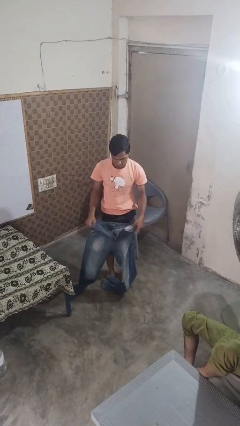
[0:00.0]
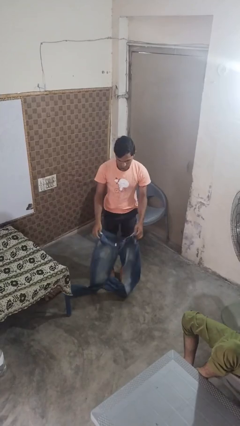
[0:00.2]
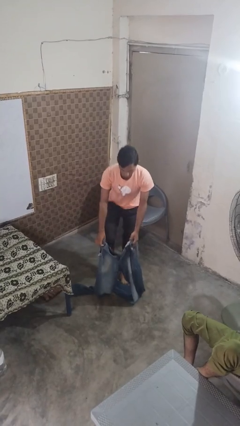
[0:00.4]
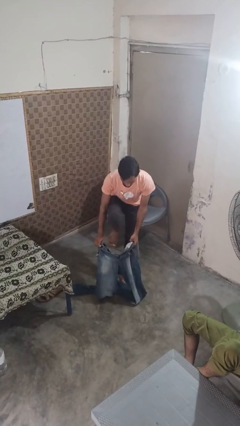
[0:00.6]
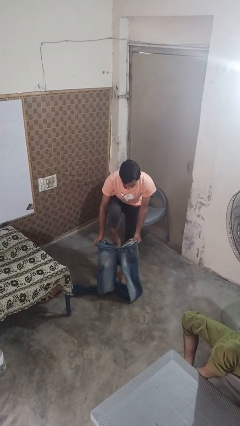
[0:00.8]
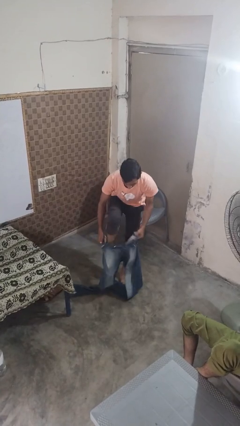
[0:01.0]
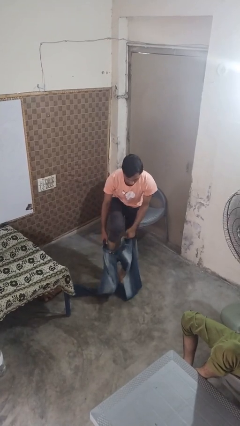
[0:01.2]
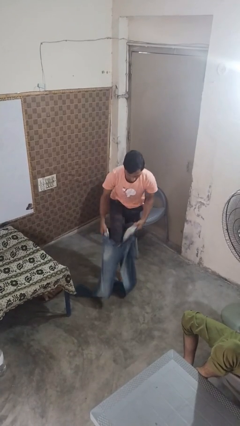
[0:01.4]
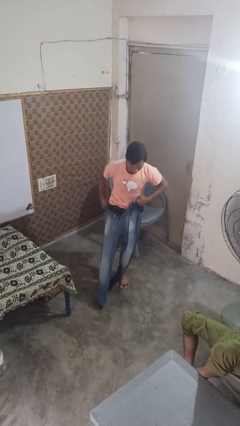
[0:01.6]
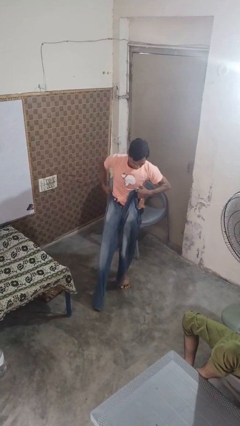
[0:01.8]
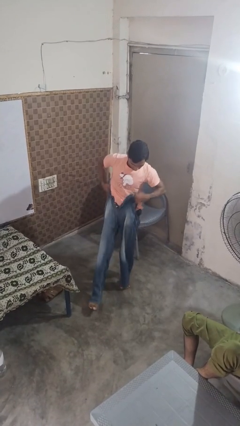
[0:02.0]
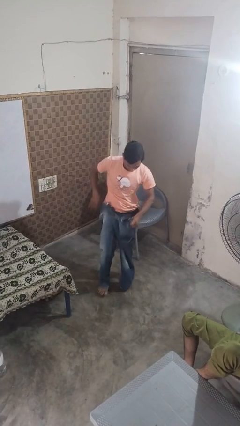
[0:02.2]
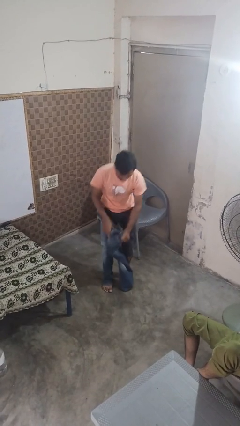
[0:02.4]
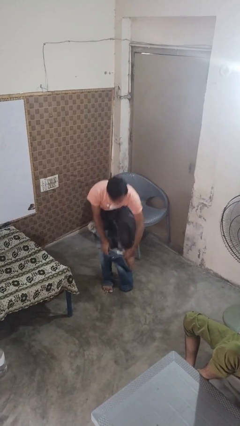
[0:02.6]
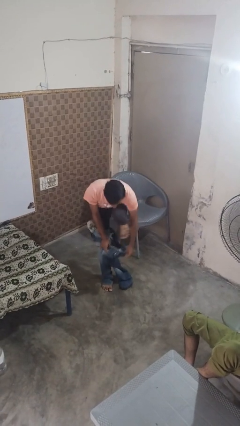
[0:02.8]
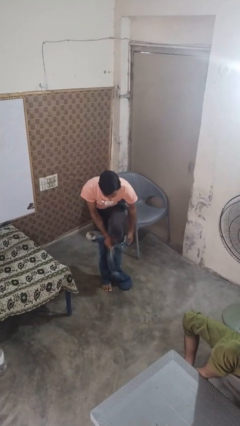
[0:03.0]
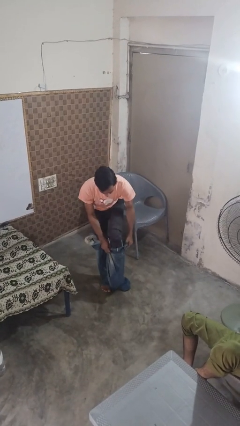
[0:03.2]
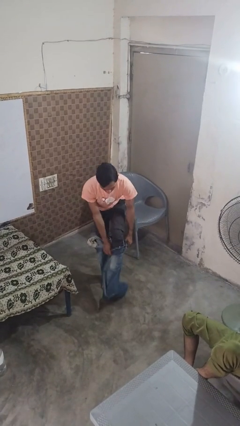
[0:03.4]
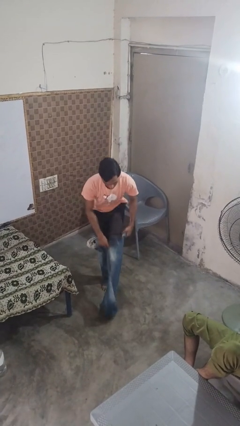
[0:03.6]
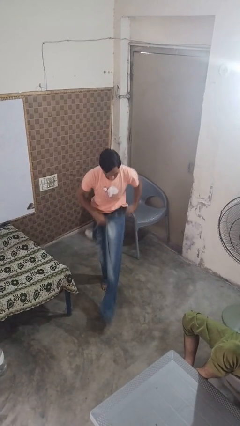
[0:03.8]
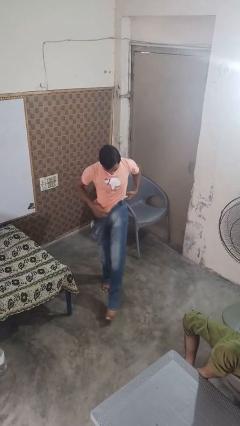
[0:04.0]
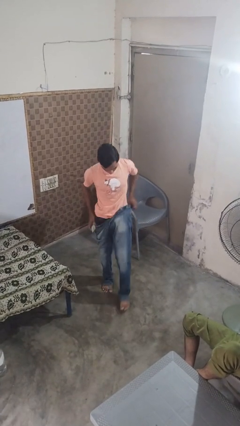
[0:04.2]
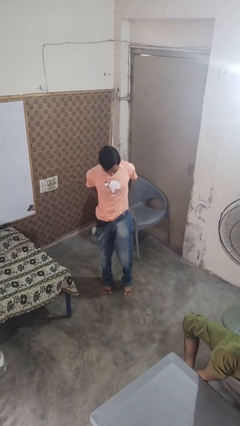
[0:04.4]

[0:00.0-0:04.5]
person puts on pants

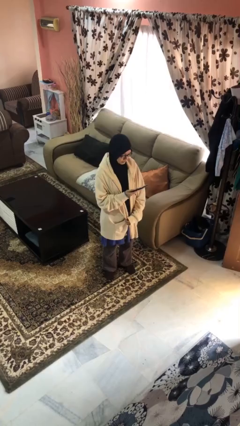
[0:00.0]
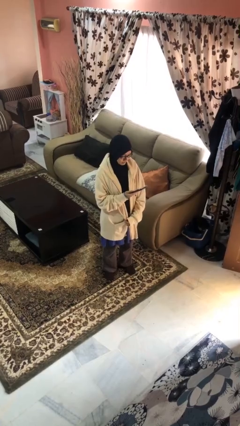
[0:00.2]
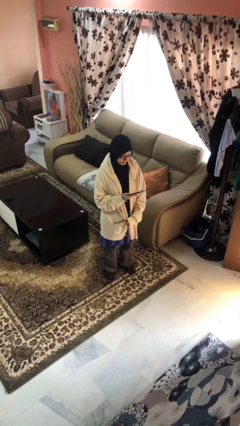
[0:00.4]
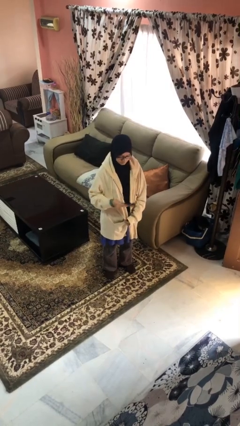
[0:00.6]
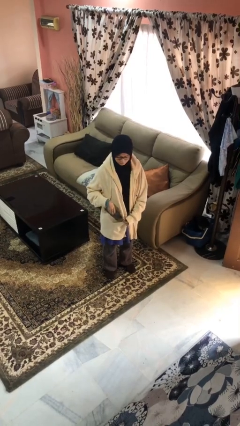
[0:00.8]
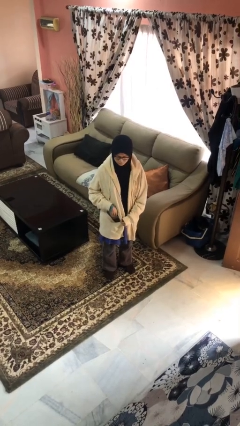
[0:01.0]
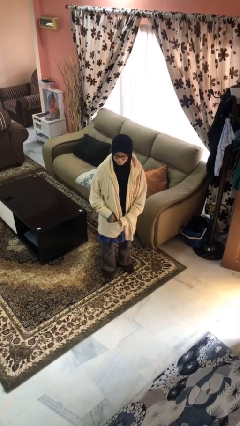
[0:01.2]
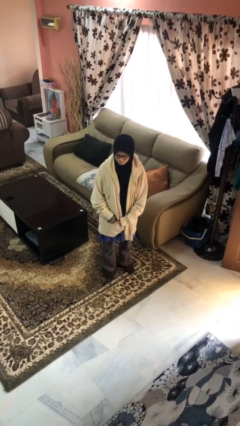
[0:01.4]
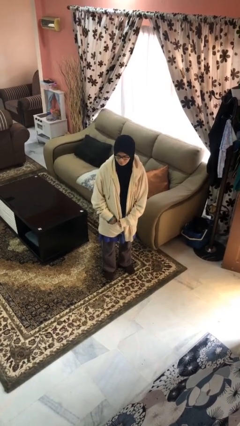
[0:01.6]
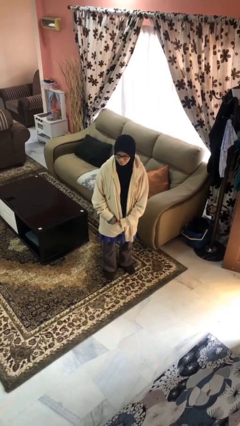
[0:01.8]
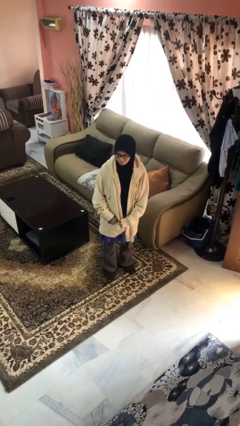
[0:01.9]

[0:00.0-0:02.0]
person puts phone into pocket

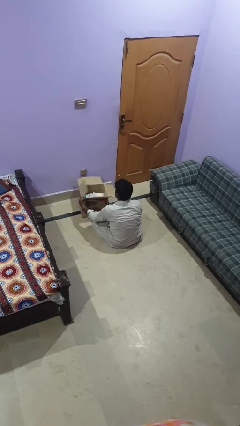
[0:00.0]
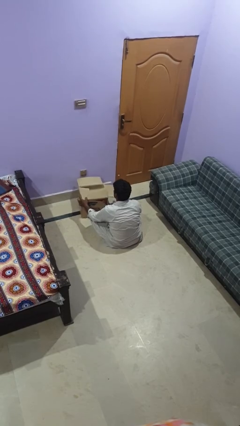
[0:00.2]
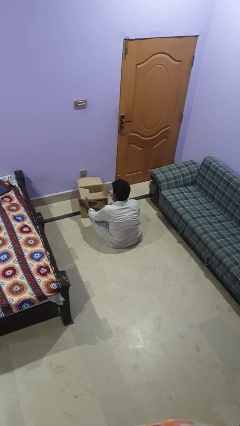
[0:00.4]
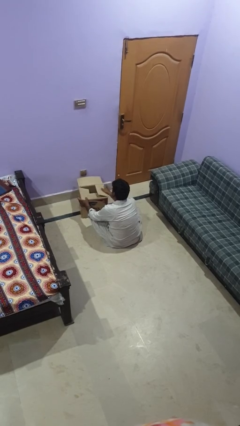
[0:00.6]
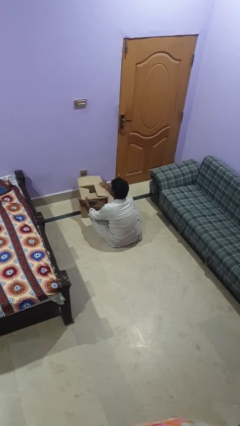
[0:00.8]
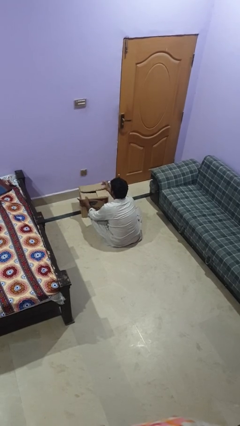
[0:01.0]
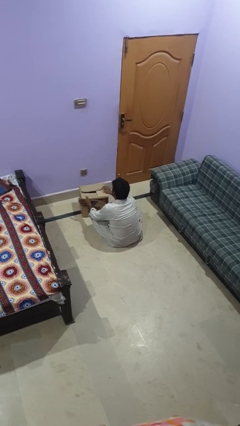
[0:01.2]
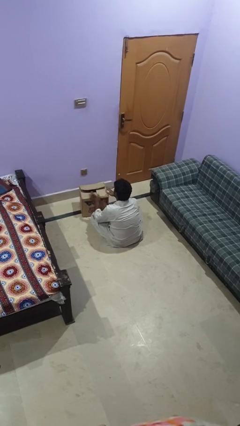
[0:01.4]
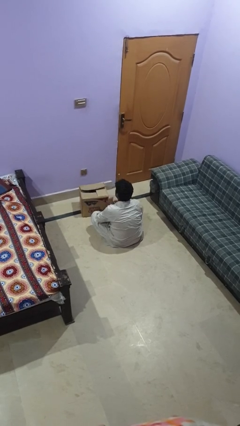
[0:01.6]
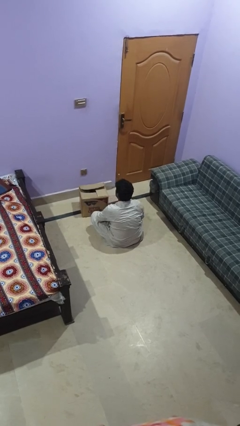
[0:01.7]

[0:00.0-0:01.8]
person closes box

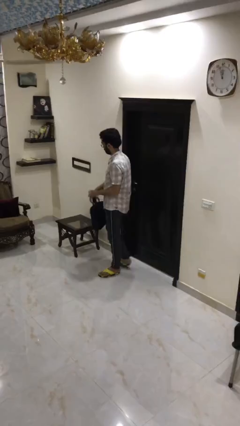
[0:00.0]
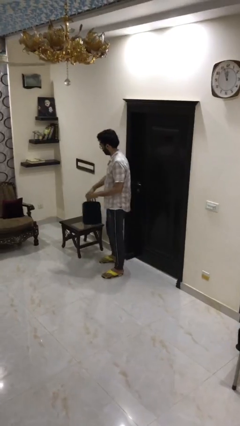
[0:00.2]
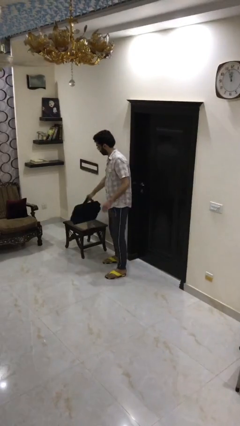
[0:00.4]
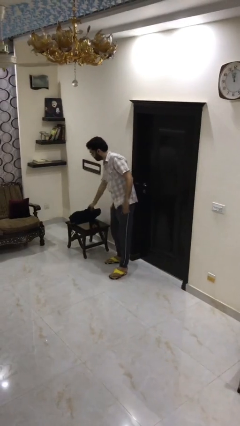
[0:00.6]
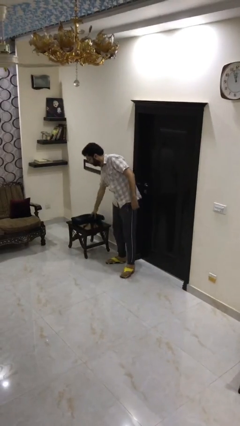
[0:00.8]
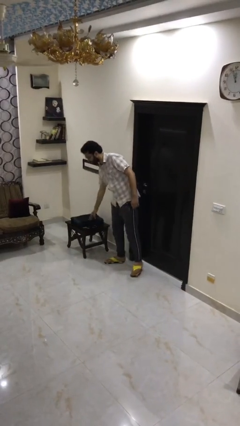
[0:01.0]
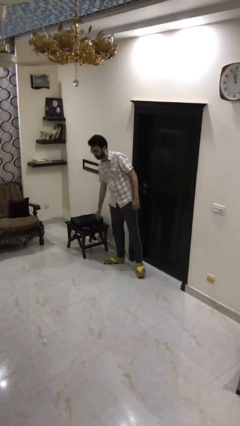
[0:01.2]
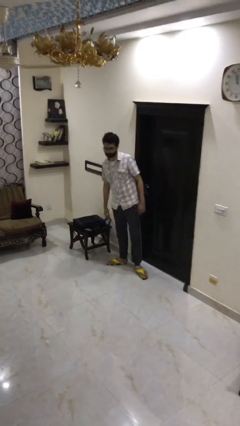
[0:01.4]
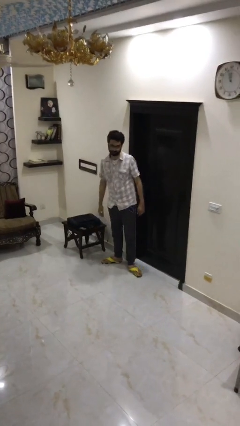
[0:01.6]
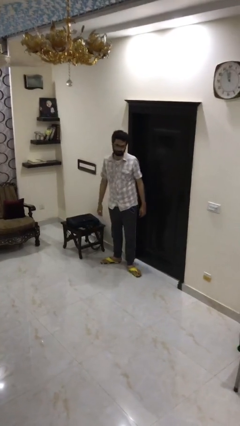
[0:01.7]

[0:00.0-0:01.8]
person puts down object on table

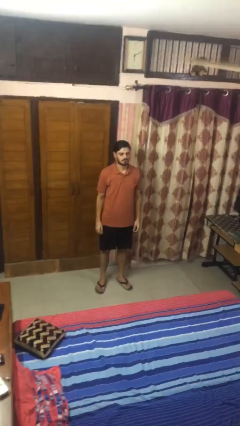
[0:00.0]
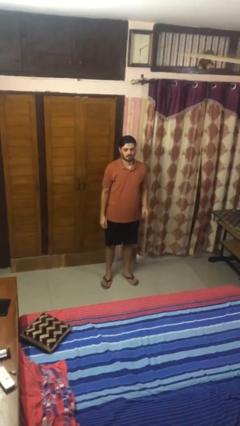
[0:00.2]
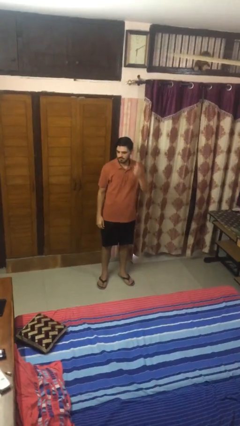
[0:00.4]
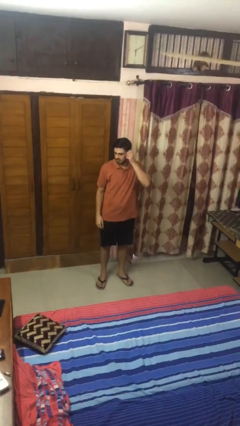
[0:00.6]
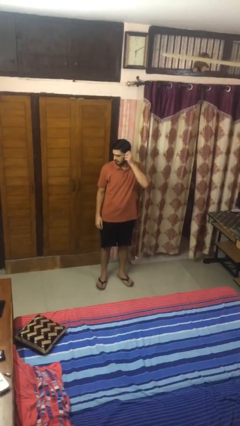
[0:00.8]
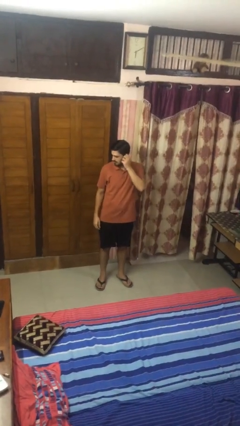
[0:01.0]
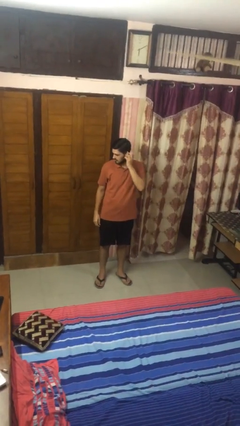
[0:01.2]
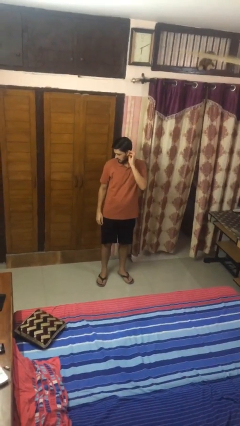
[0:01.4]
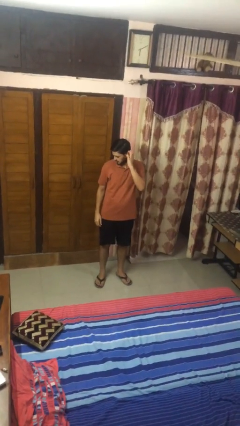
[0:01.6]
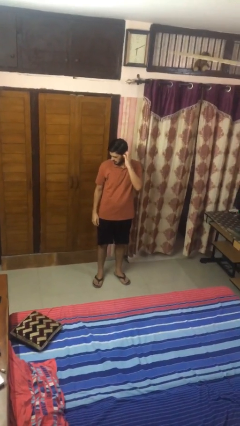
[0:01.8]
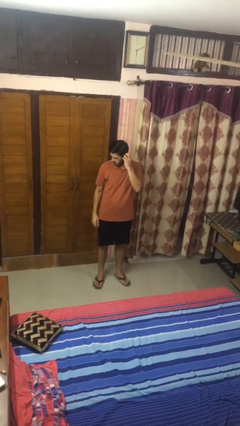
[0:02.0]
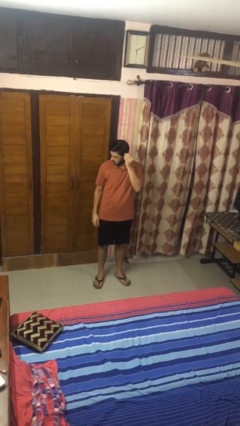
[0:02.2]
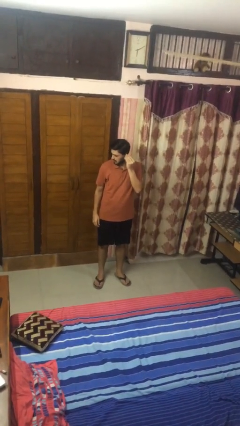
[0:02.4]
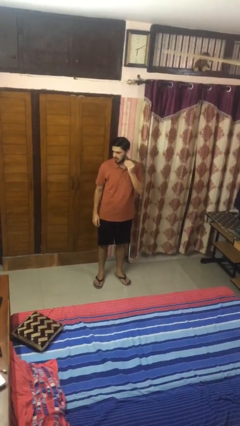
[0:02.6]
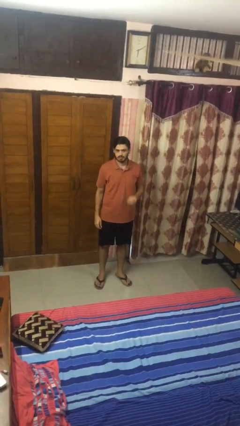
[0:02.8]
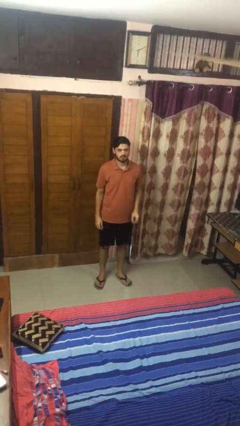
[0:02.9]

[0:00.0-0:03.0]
person touches earlobe

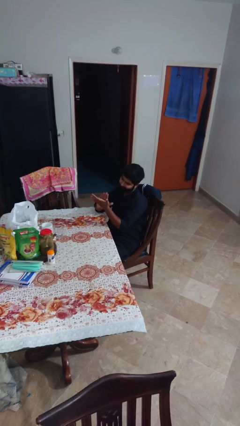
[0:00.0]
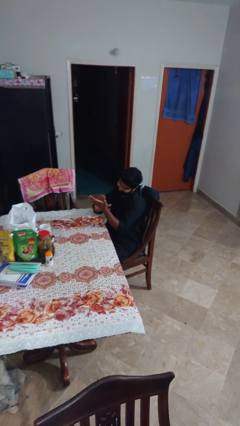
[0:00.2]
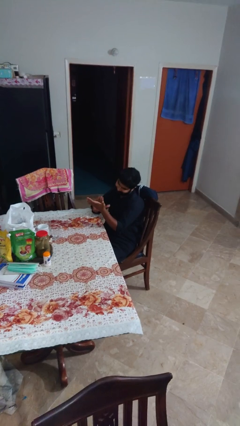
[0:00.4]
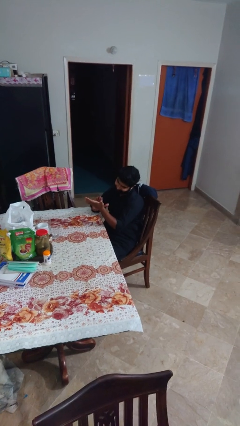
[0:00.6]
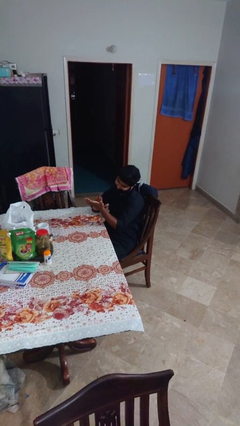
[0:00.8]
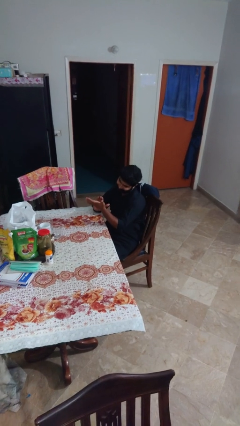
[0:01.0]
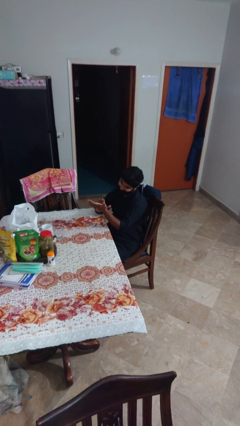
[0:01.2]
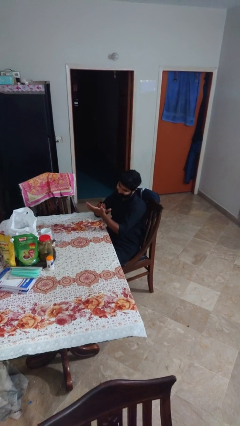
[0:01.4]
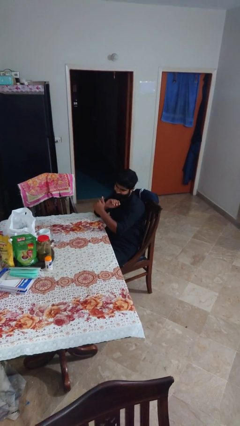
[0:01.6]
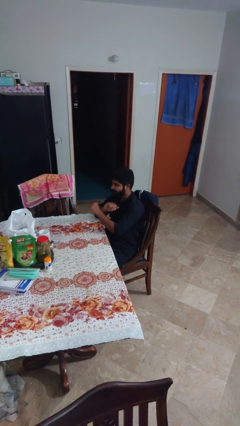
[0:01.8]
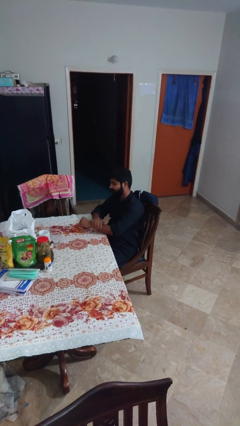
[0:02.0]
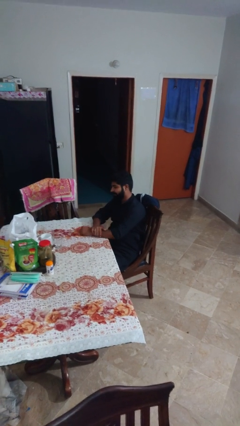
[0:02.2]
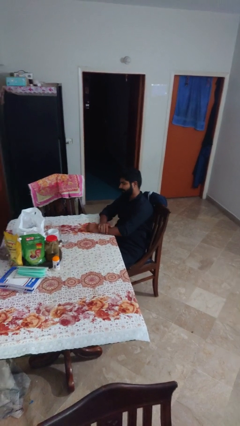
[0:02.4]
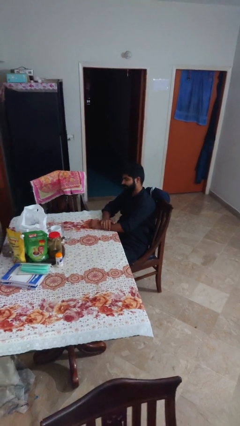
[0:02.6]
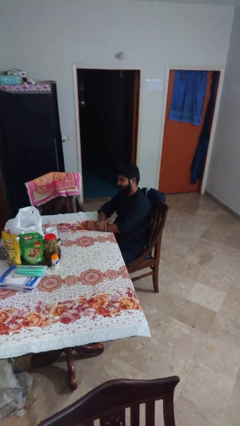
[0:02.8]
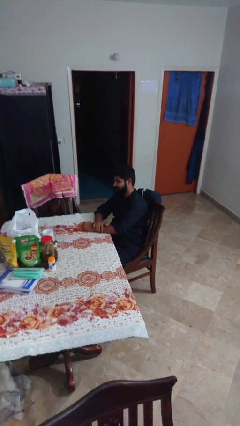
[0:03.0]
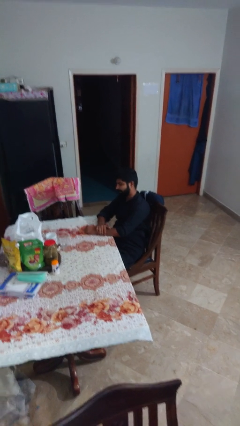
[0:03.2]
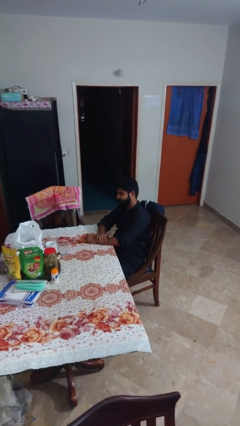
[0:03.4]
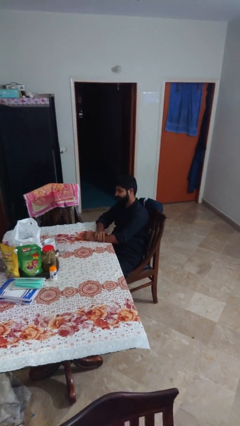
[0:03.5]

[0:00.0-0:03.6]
person claps hands

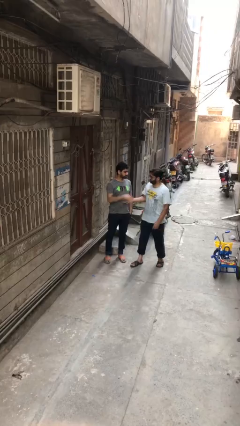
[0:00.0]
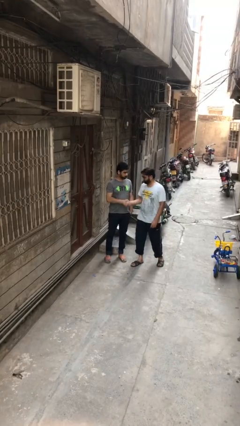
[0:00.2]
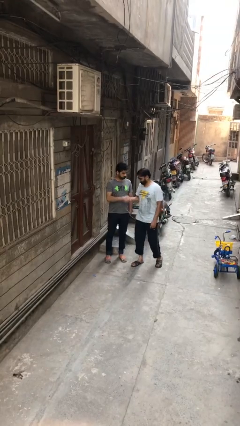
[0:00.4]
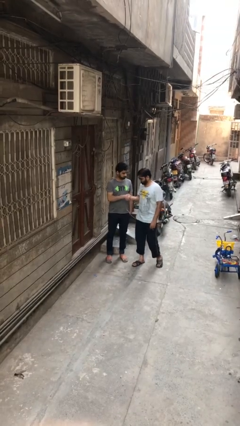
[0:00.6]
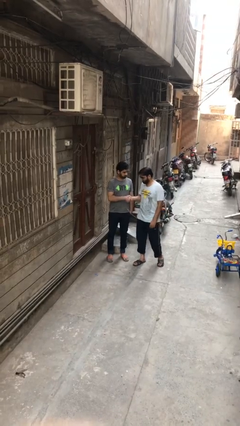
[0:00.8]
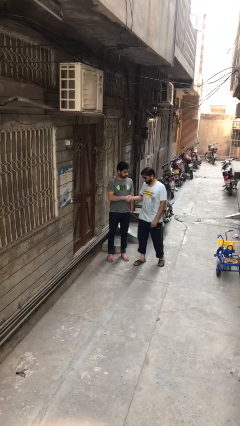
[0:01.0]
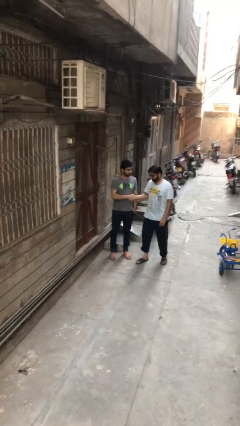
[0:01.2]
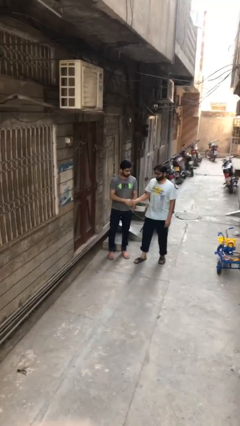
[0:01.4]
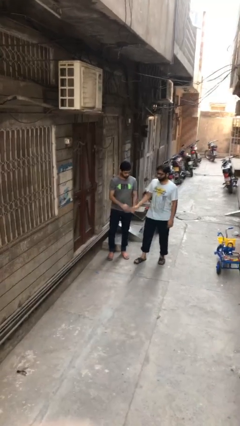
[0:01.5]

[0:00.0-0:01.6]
person shakes hand
